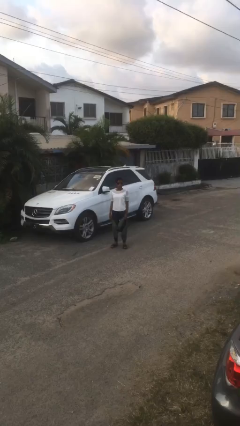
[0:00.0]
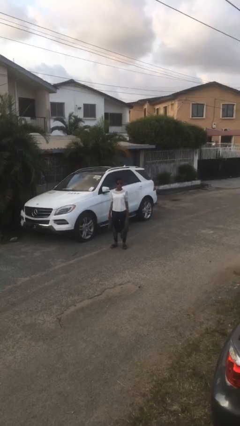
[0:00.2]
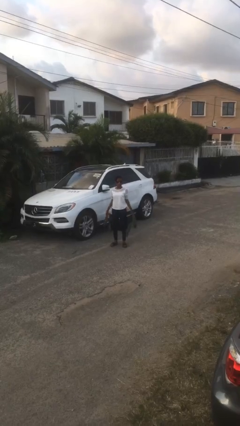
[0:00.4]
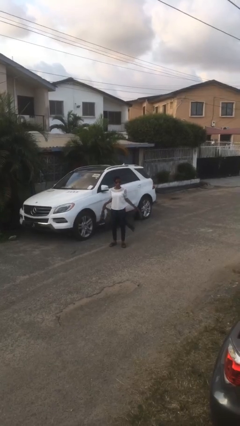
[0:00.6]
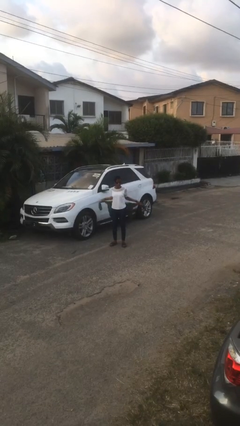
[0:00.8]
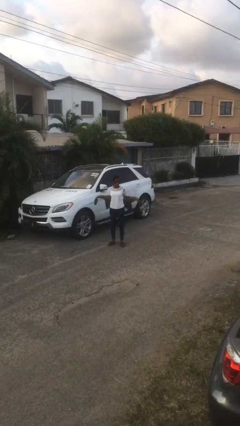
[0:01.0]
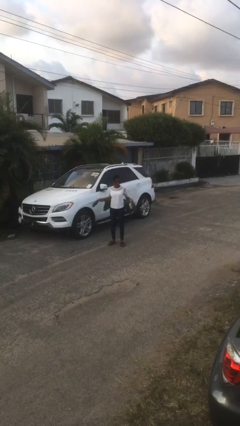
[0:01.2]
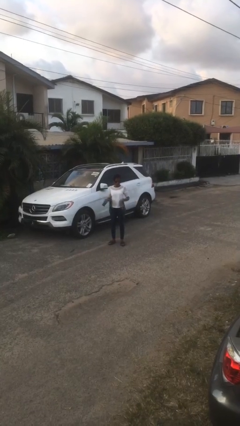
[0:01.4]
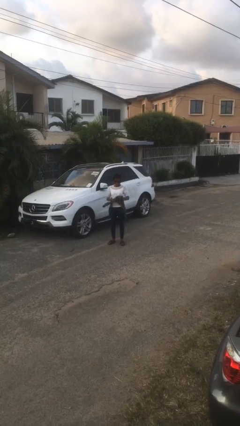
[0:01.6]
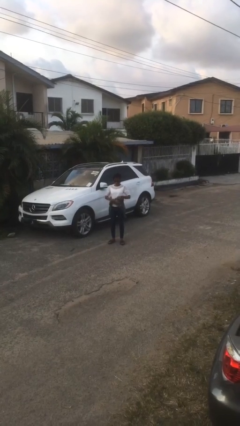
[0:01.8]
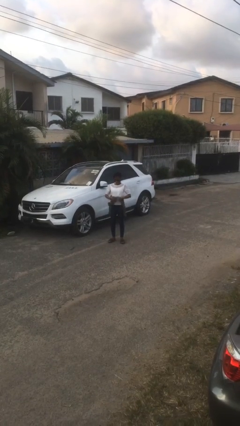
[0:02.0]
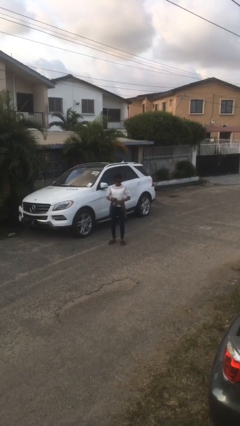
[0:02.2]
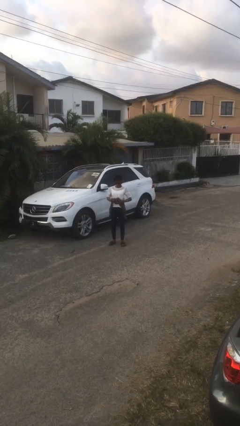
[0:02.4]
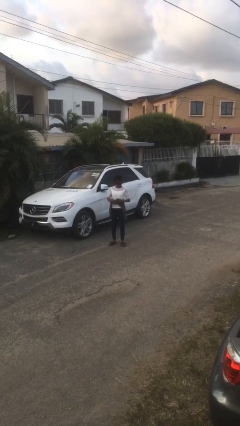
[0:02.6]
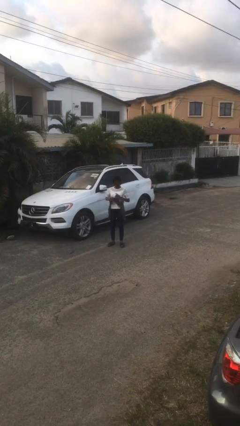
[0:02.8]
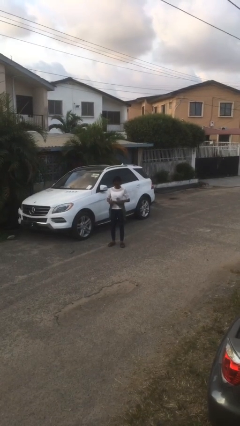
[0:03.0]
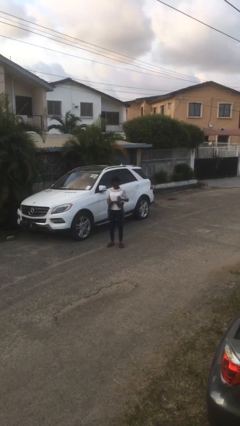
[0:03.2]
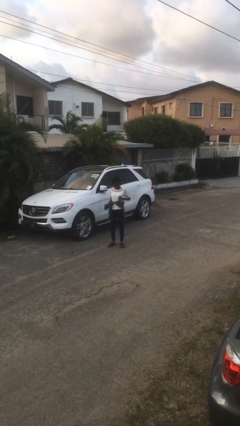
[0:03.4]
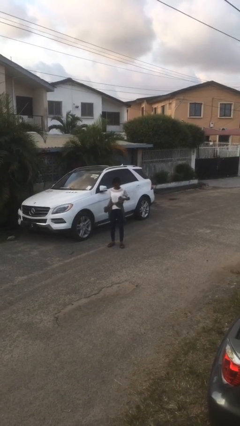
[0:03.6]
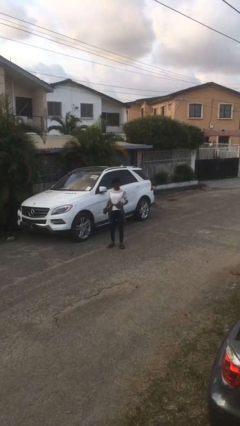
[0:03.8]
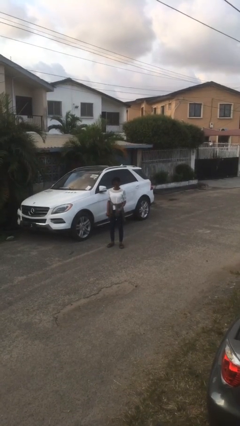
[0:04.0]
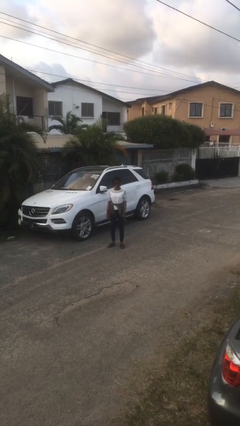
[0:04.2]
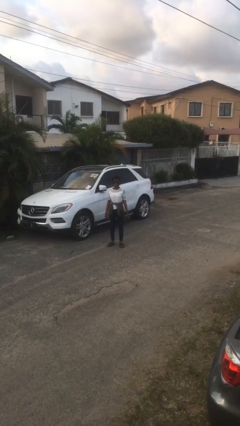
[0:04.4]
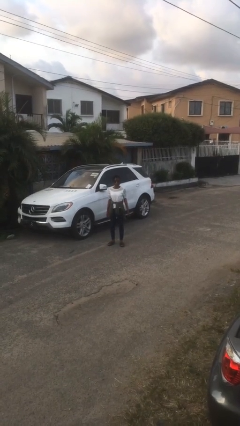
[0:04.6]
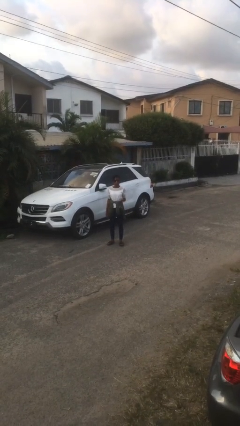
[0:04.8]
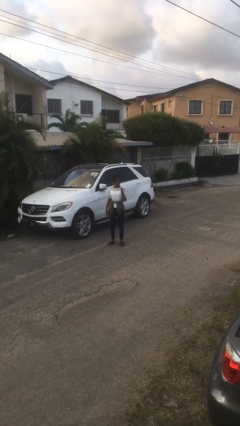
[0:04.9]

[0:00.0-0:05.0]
person ties jacket around waist

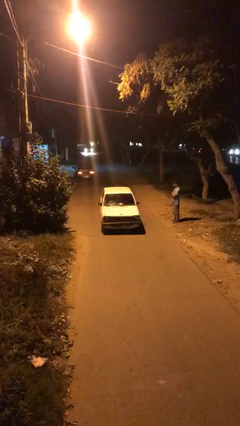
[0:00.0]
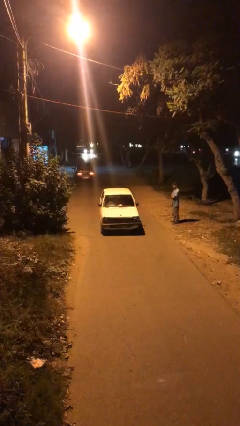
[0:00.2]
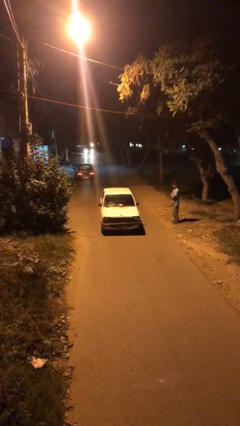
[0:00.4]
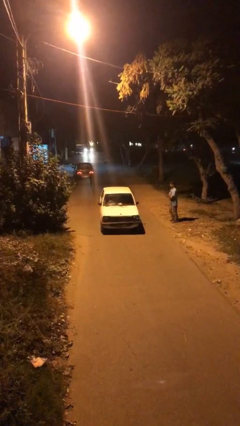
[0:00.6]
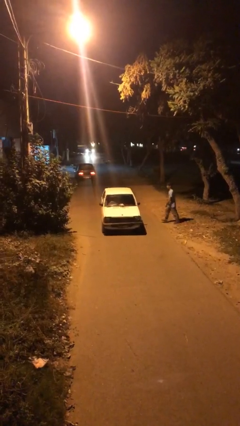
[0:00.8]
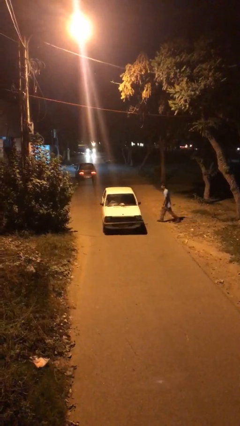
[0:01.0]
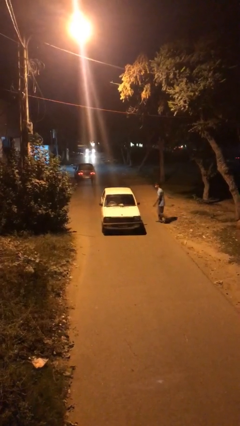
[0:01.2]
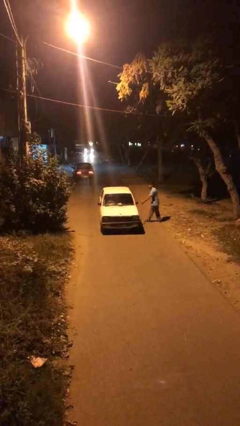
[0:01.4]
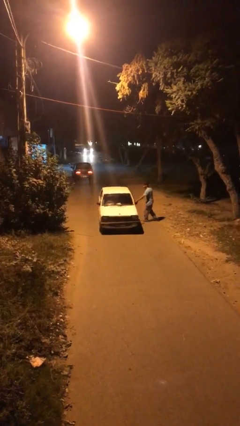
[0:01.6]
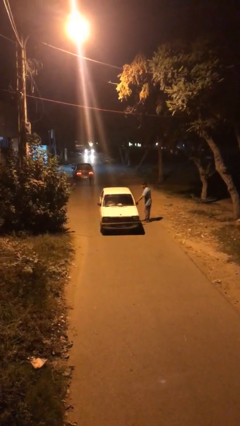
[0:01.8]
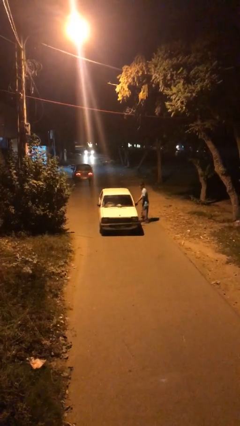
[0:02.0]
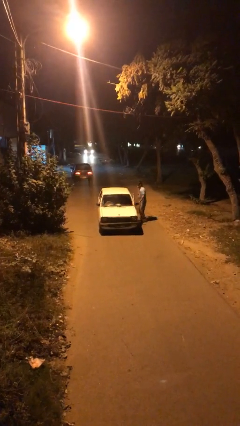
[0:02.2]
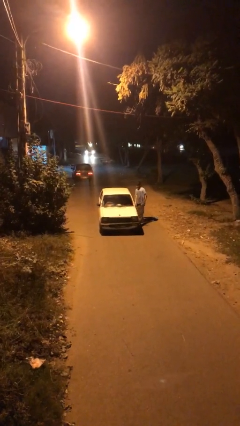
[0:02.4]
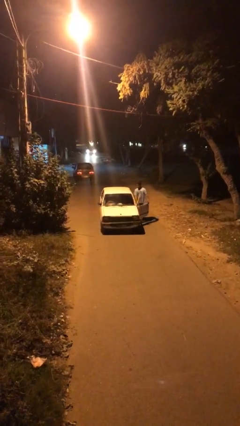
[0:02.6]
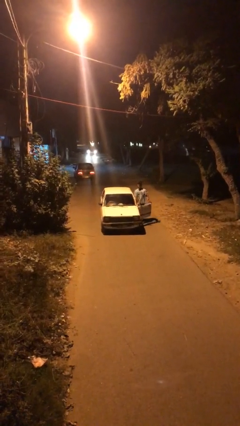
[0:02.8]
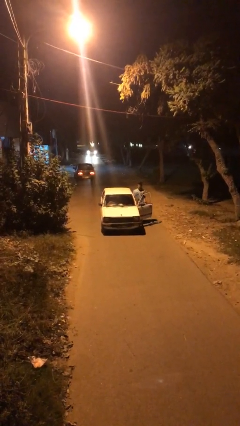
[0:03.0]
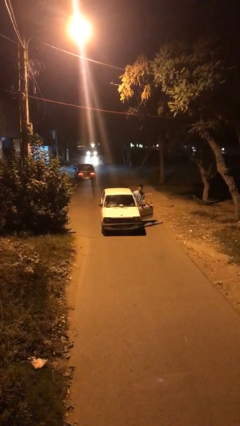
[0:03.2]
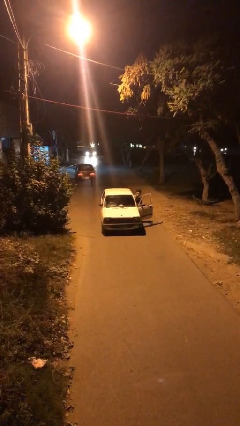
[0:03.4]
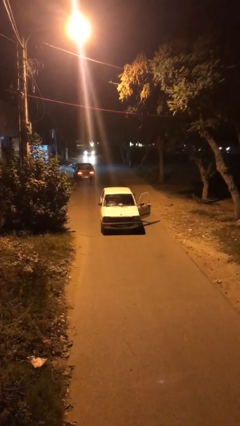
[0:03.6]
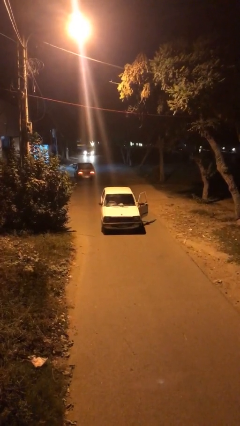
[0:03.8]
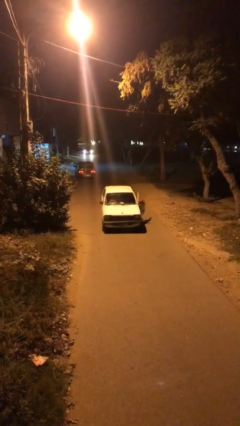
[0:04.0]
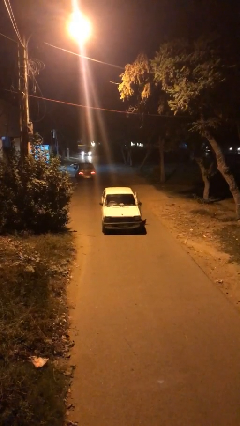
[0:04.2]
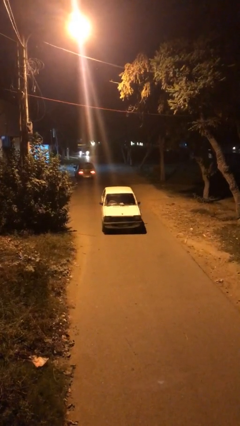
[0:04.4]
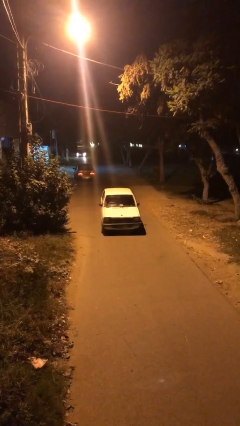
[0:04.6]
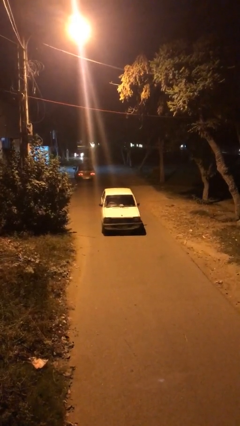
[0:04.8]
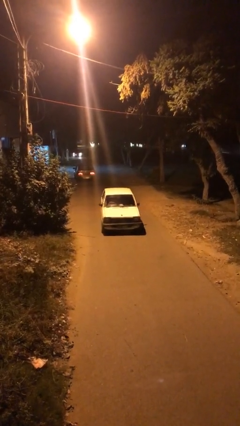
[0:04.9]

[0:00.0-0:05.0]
car picks up person

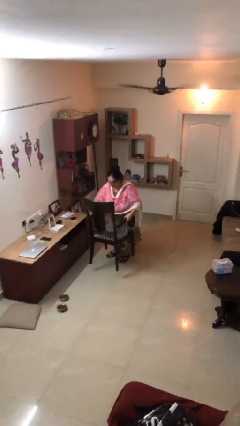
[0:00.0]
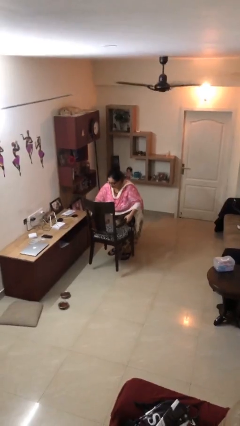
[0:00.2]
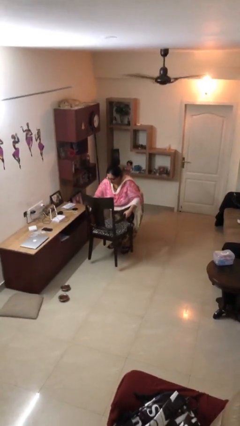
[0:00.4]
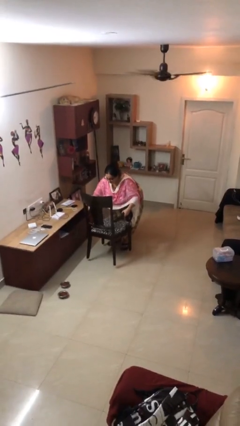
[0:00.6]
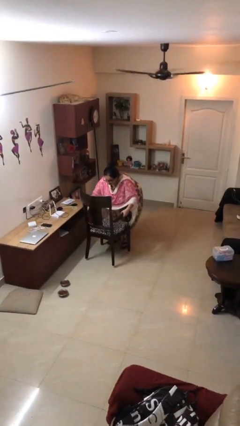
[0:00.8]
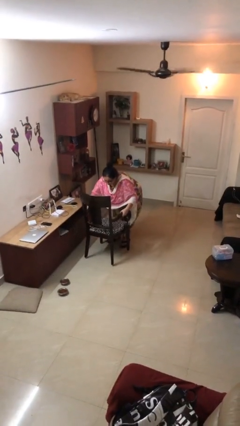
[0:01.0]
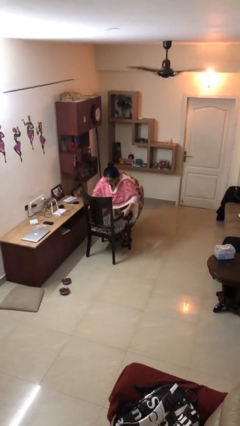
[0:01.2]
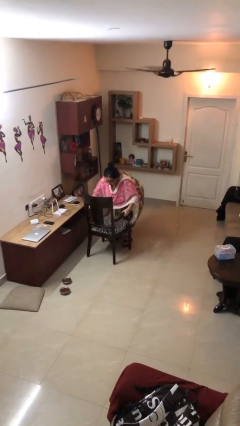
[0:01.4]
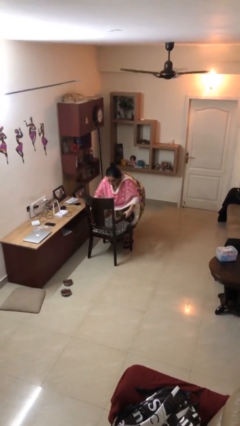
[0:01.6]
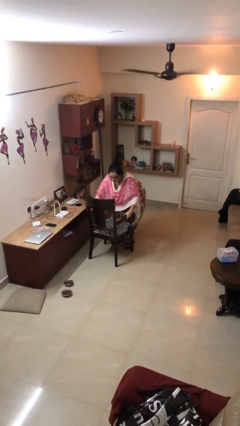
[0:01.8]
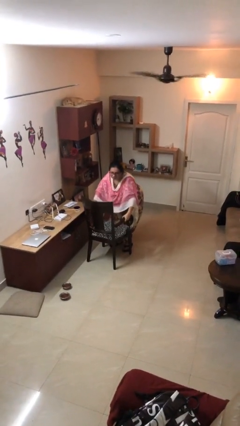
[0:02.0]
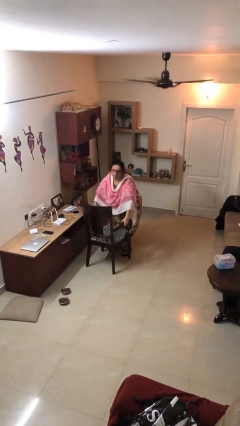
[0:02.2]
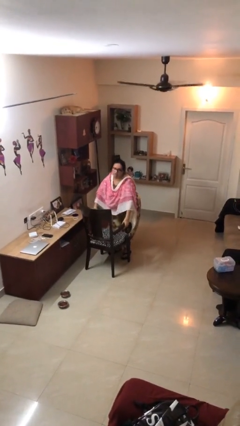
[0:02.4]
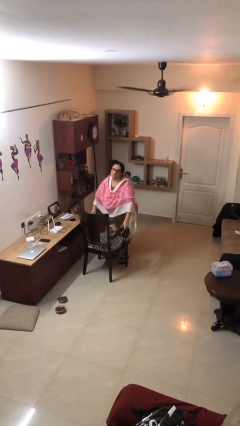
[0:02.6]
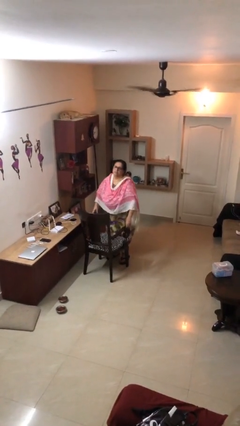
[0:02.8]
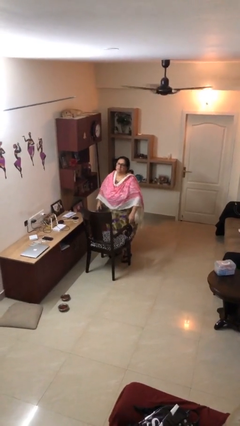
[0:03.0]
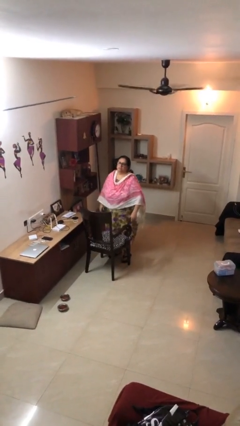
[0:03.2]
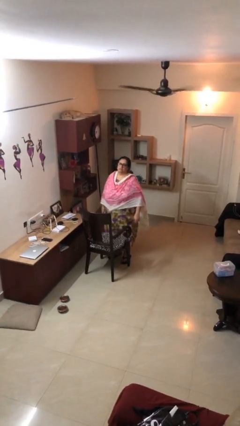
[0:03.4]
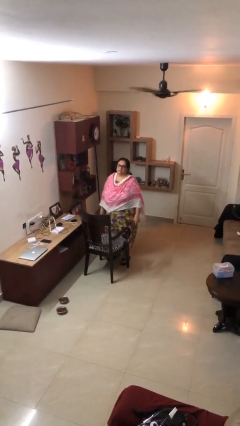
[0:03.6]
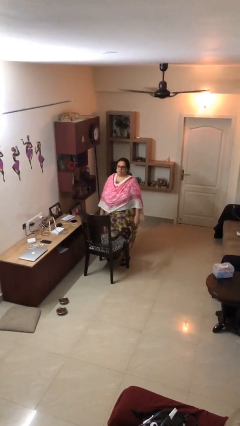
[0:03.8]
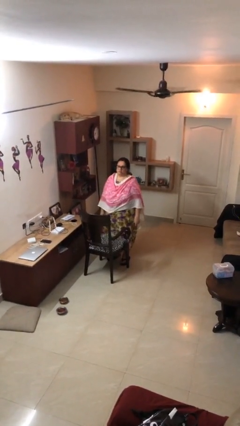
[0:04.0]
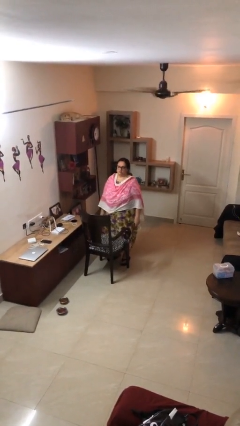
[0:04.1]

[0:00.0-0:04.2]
person puts down object on floor

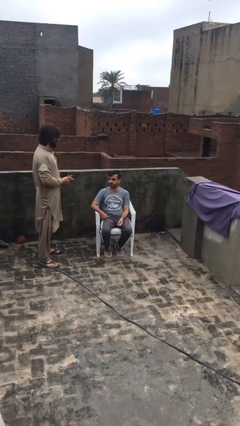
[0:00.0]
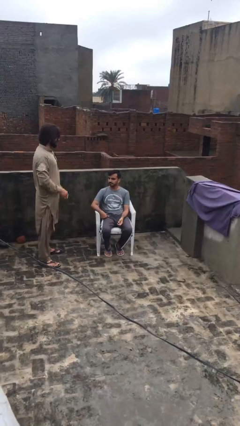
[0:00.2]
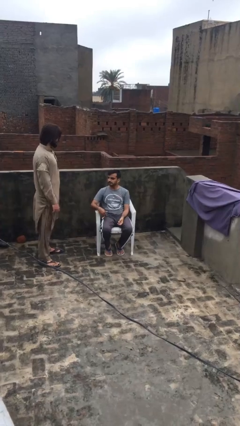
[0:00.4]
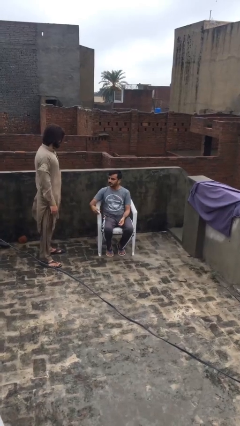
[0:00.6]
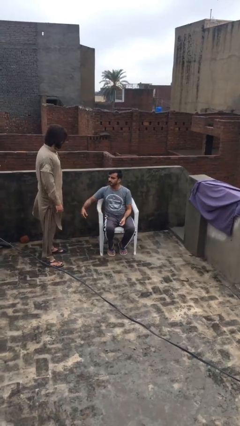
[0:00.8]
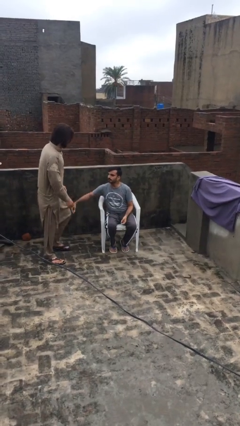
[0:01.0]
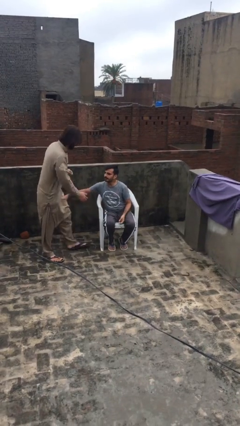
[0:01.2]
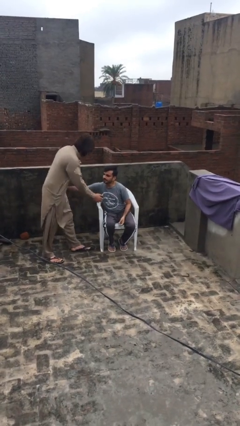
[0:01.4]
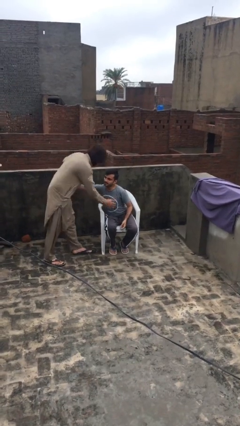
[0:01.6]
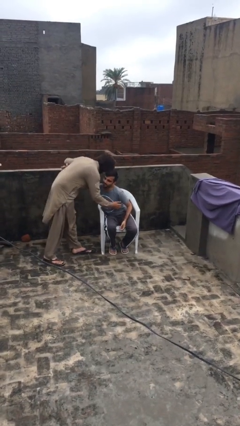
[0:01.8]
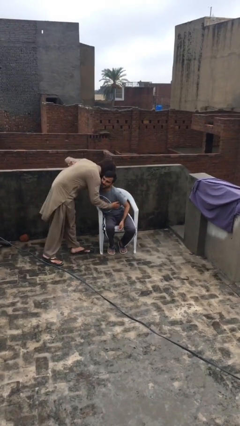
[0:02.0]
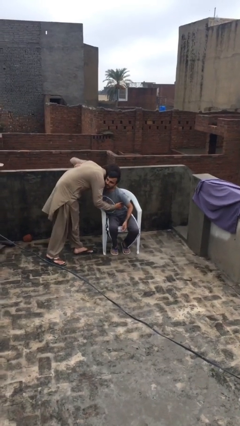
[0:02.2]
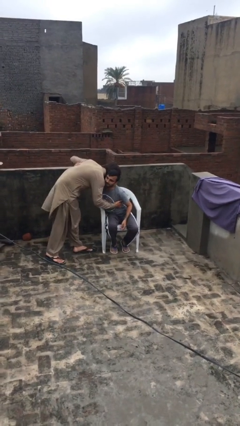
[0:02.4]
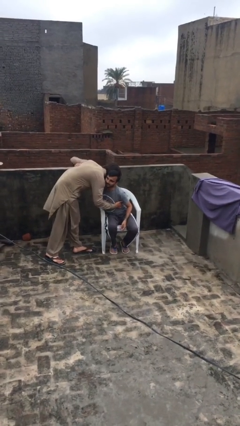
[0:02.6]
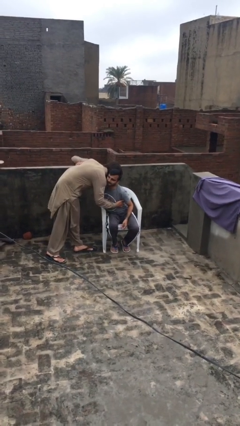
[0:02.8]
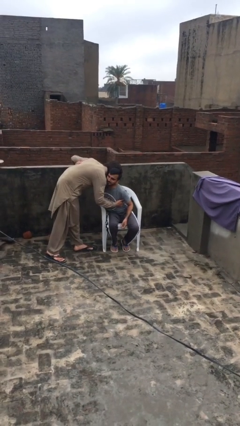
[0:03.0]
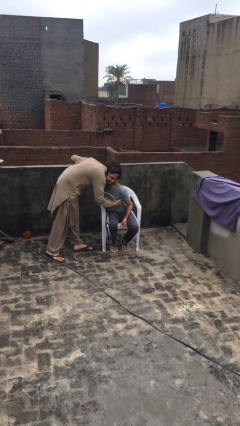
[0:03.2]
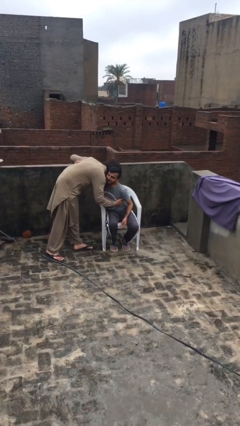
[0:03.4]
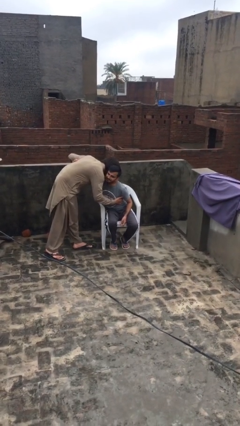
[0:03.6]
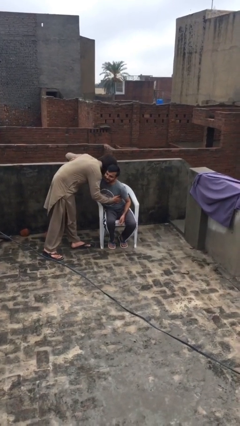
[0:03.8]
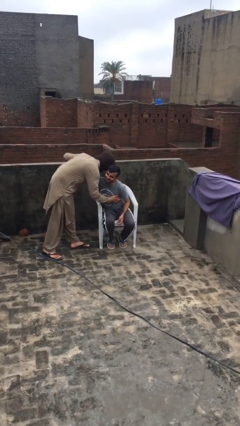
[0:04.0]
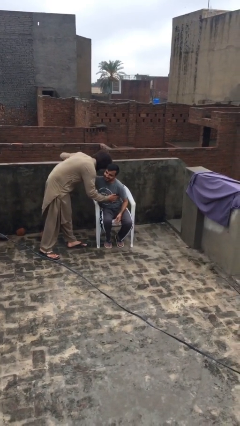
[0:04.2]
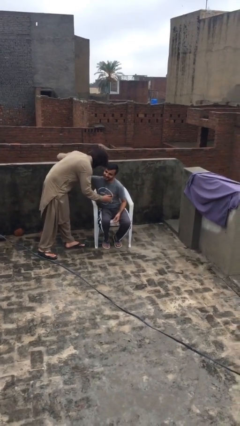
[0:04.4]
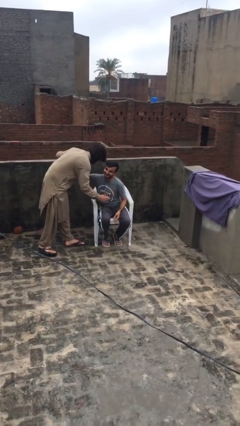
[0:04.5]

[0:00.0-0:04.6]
person embraces person
